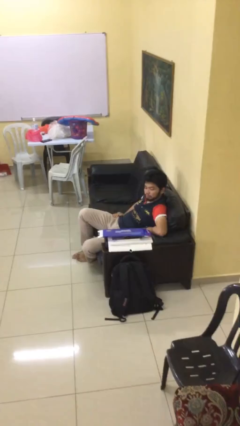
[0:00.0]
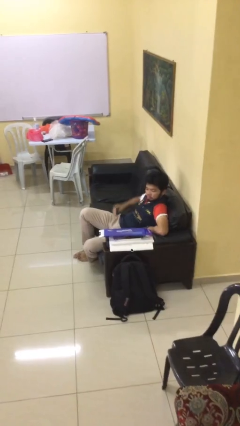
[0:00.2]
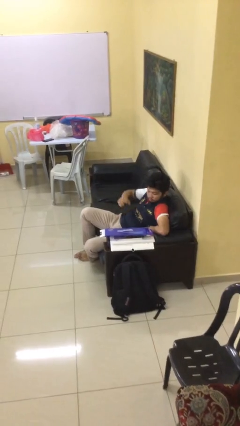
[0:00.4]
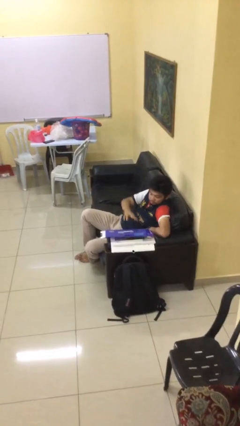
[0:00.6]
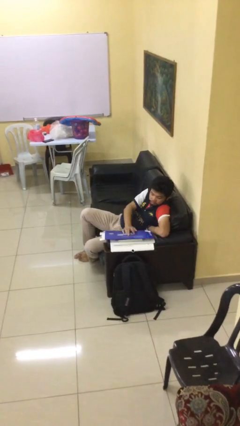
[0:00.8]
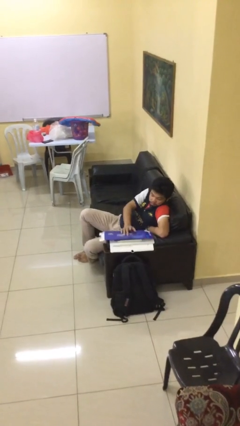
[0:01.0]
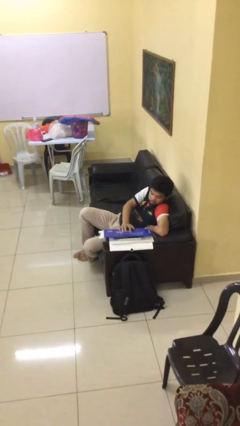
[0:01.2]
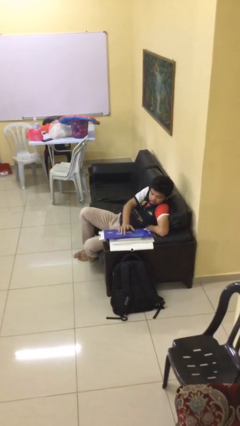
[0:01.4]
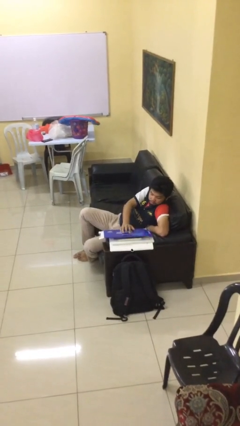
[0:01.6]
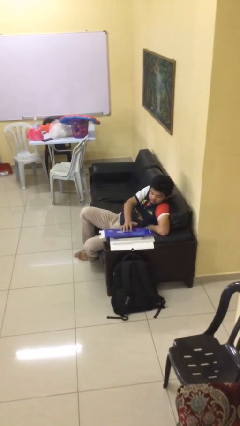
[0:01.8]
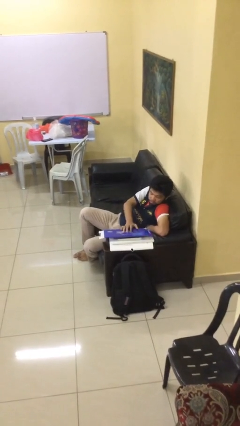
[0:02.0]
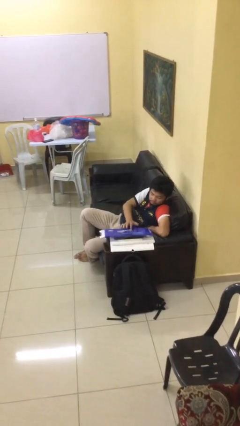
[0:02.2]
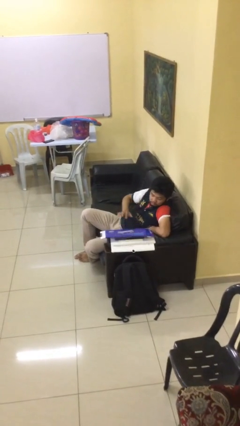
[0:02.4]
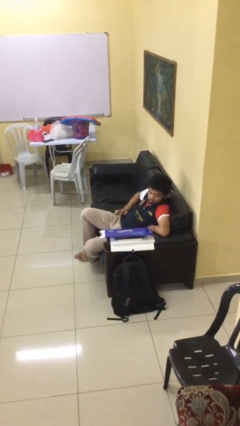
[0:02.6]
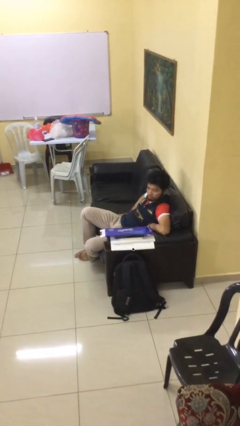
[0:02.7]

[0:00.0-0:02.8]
person taps object with finger

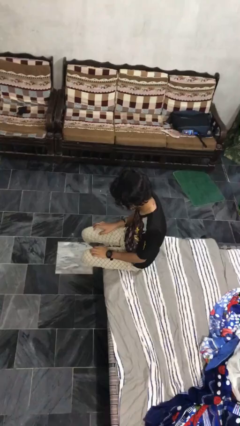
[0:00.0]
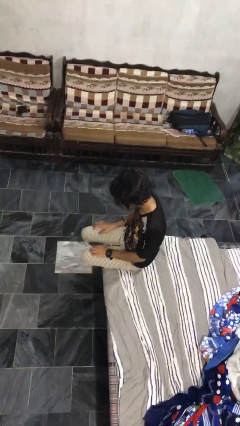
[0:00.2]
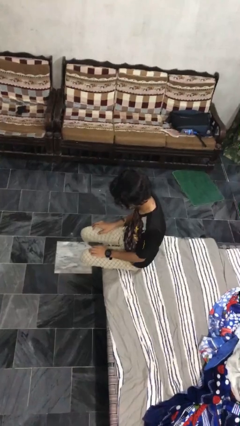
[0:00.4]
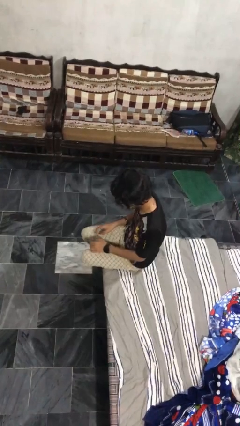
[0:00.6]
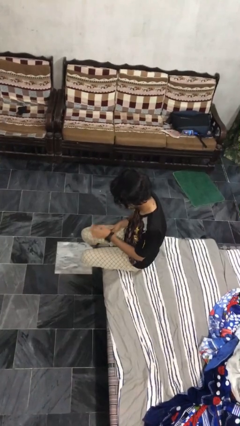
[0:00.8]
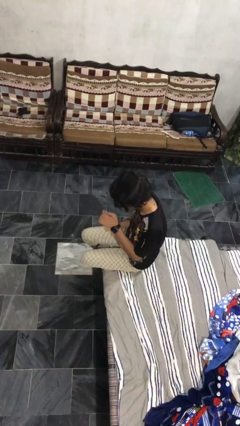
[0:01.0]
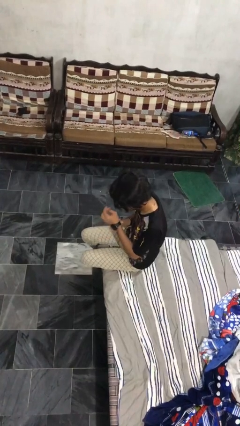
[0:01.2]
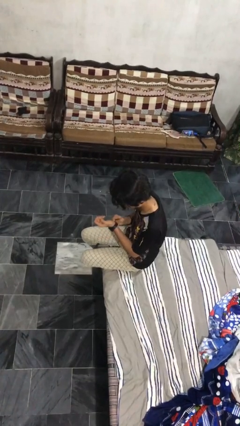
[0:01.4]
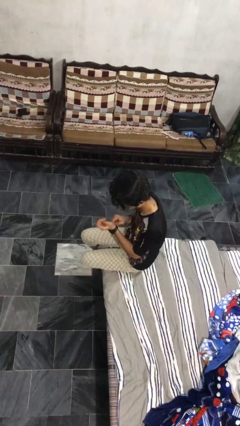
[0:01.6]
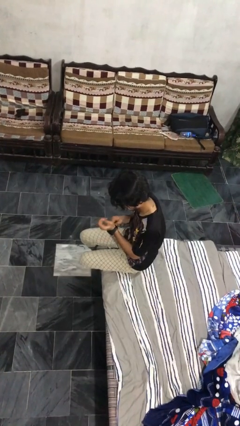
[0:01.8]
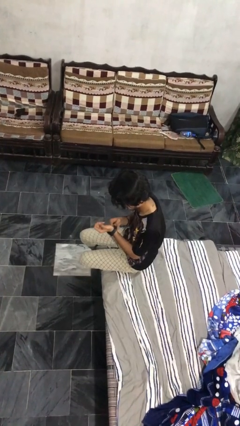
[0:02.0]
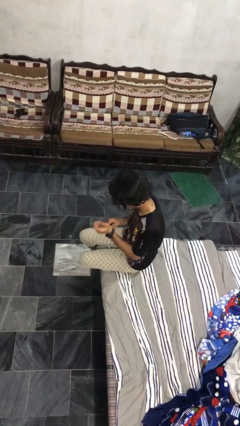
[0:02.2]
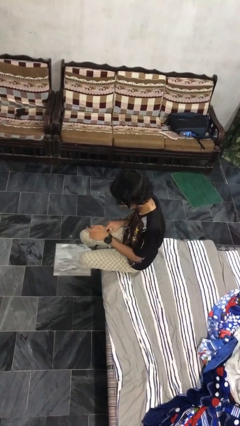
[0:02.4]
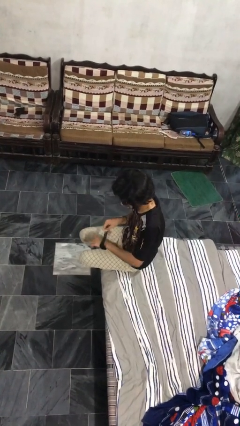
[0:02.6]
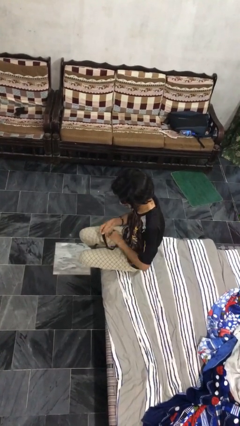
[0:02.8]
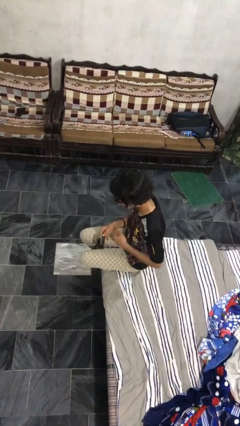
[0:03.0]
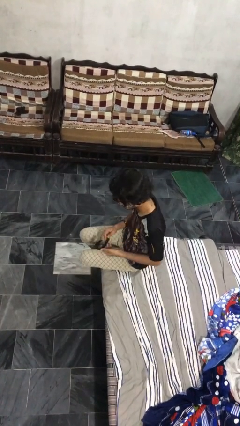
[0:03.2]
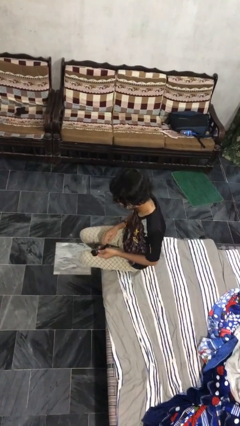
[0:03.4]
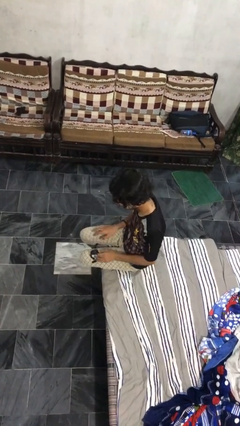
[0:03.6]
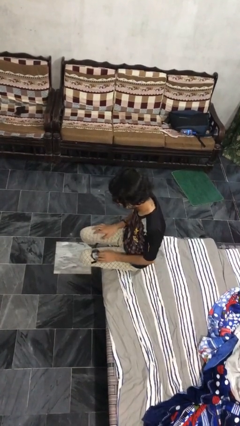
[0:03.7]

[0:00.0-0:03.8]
person takes off wristwatch

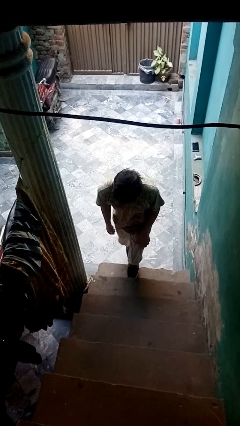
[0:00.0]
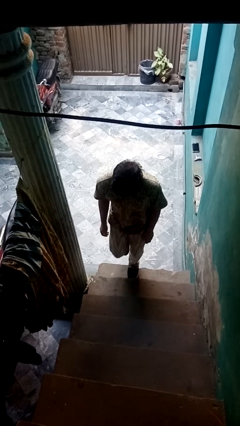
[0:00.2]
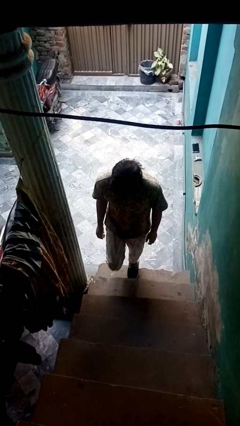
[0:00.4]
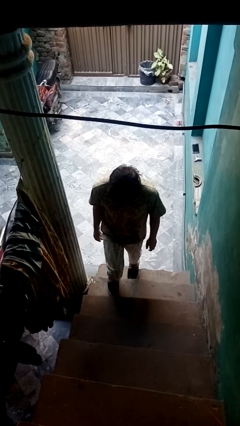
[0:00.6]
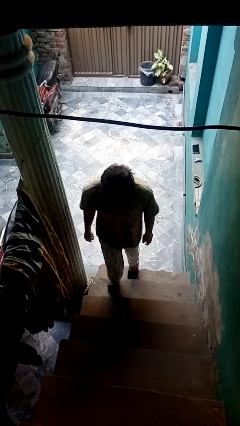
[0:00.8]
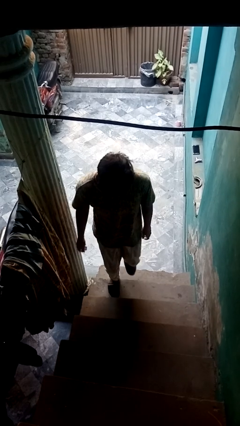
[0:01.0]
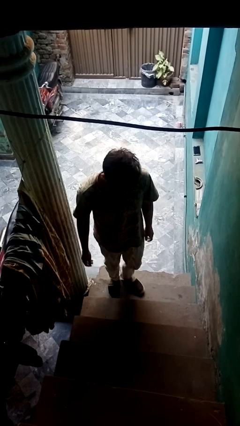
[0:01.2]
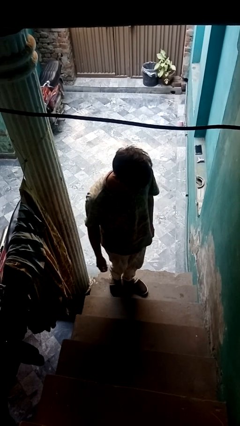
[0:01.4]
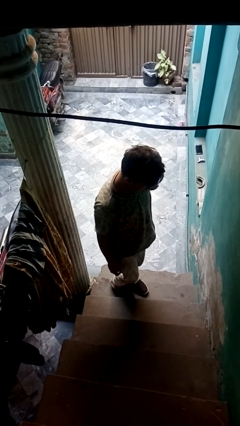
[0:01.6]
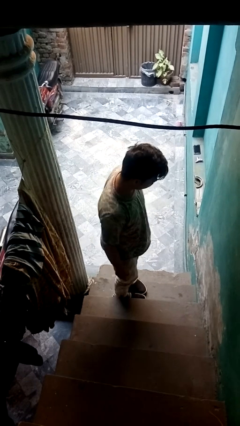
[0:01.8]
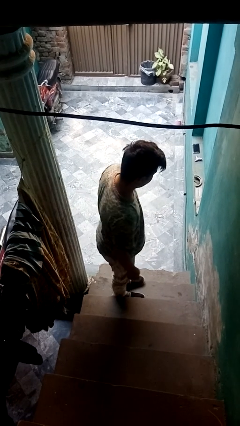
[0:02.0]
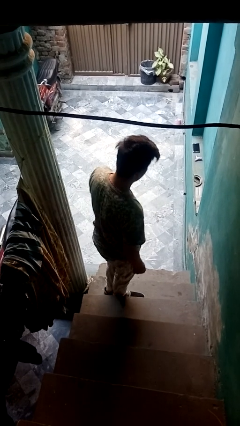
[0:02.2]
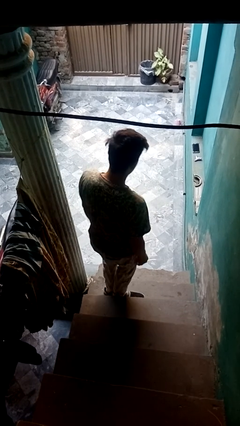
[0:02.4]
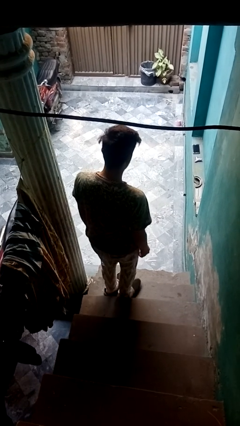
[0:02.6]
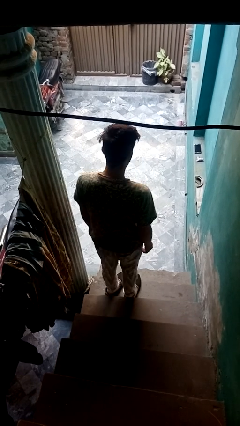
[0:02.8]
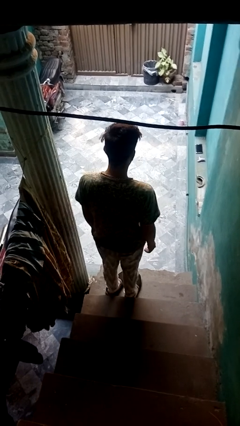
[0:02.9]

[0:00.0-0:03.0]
person climbs up stairs

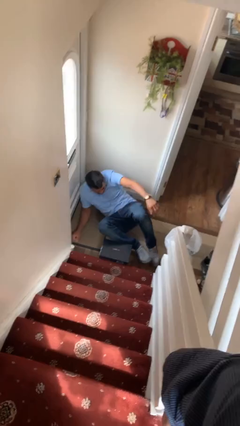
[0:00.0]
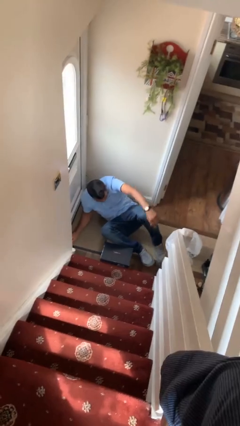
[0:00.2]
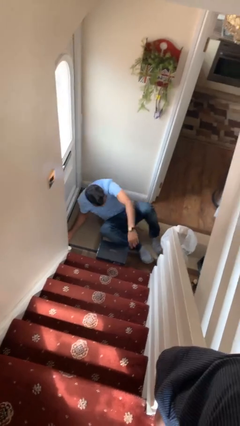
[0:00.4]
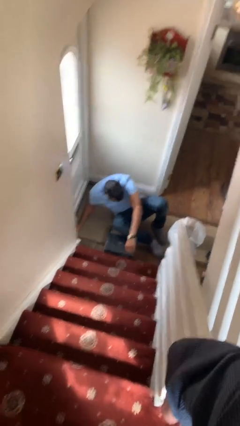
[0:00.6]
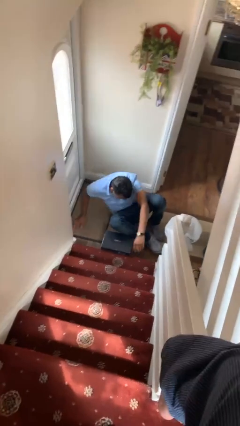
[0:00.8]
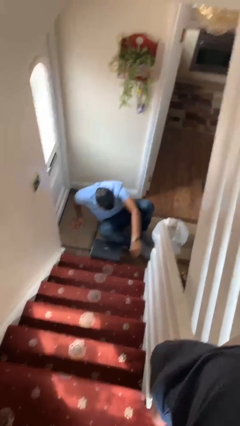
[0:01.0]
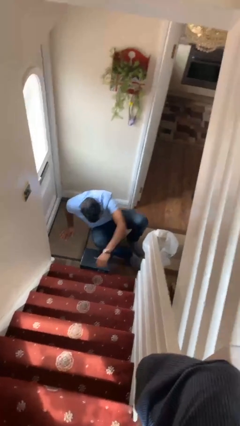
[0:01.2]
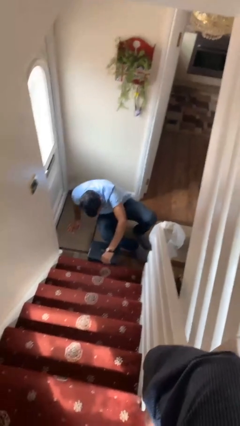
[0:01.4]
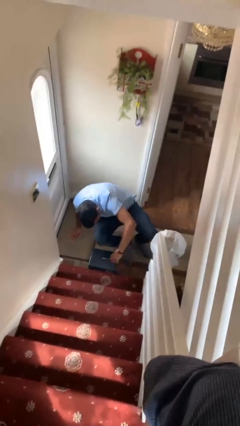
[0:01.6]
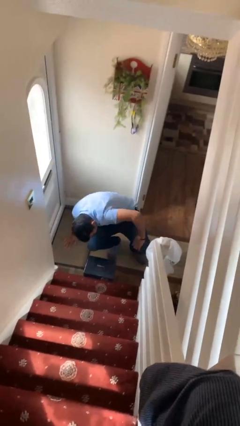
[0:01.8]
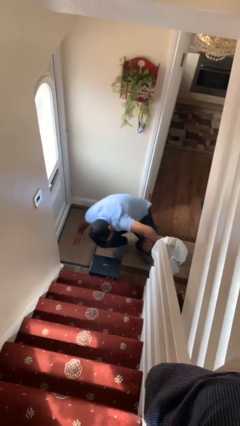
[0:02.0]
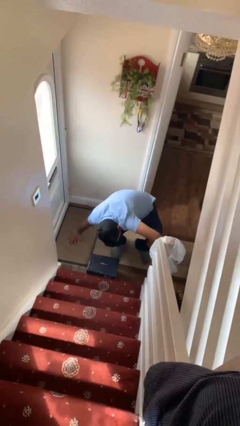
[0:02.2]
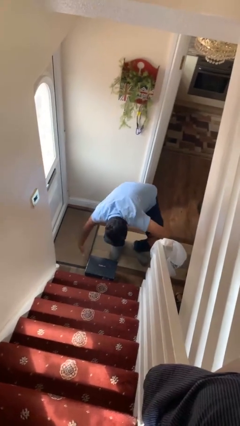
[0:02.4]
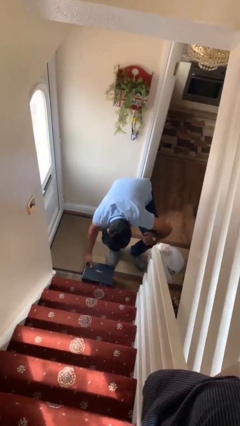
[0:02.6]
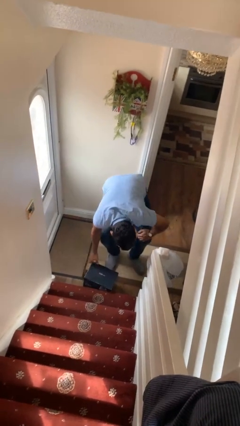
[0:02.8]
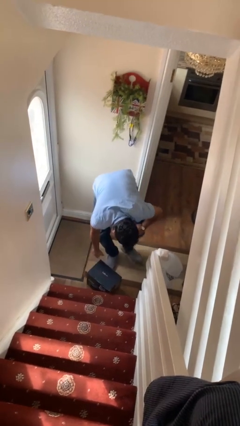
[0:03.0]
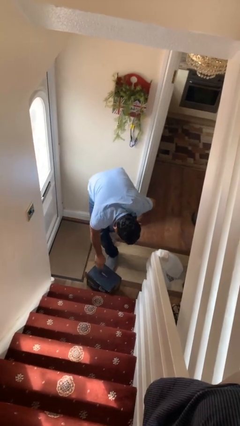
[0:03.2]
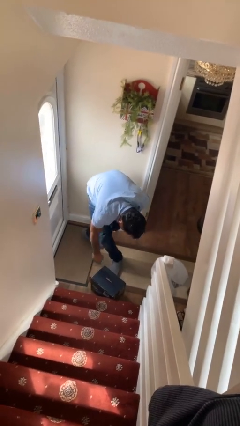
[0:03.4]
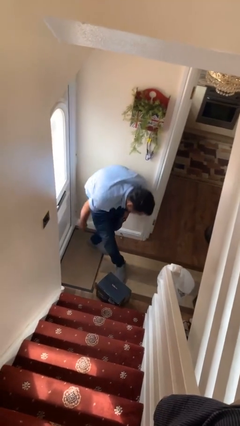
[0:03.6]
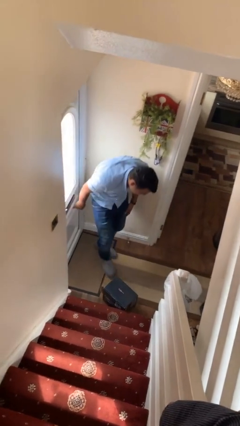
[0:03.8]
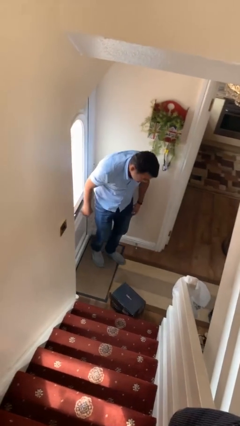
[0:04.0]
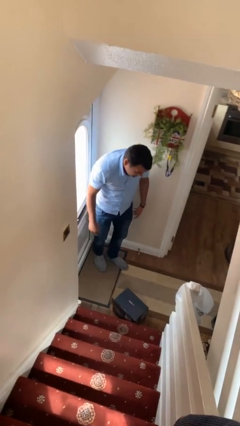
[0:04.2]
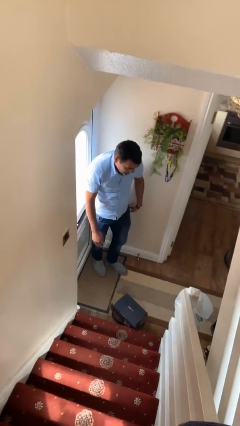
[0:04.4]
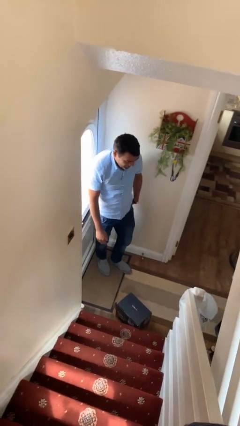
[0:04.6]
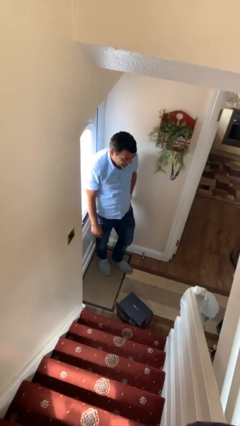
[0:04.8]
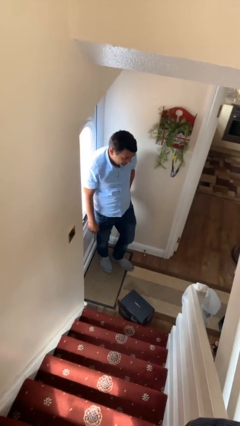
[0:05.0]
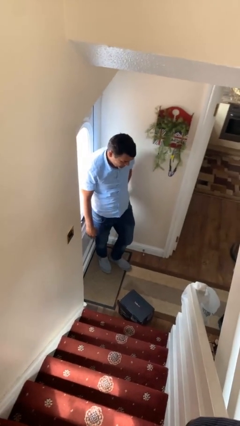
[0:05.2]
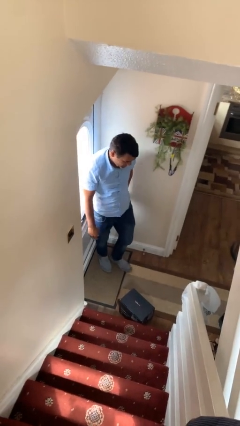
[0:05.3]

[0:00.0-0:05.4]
person stands up from floor

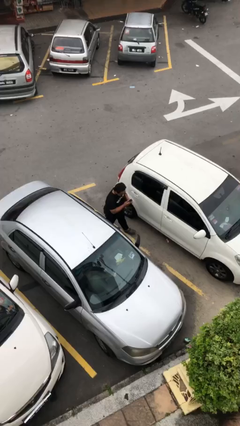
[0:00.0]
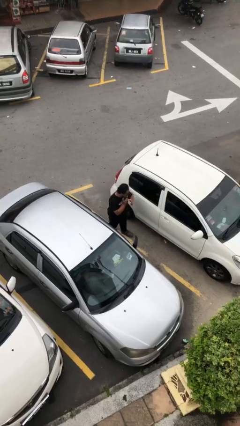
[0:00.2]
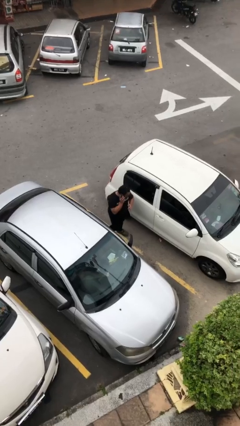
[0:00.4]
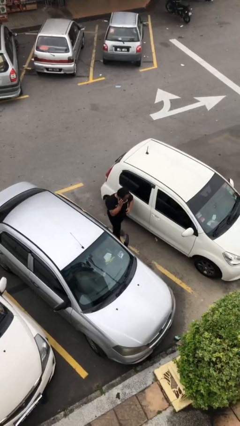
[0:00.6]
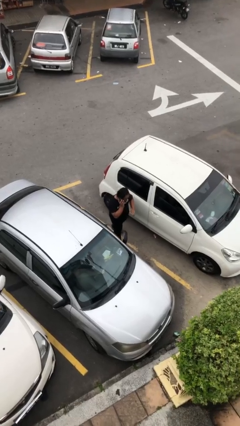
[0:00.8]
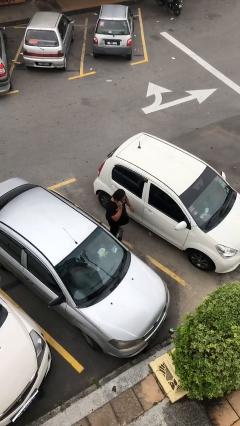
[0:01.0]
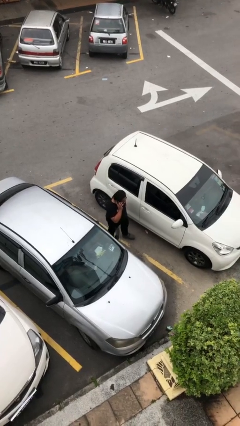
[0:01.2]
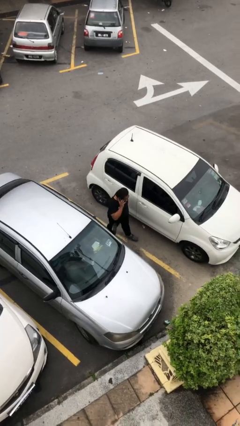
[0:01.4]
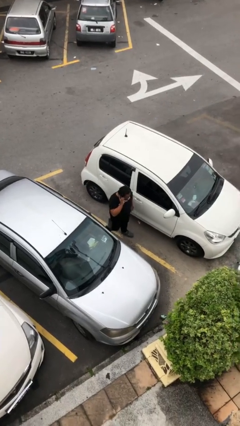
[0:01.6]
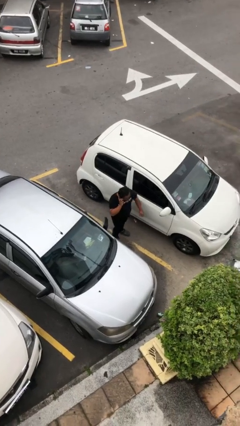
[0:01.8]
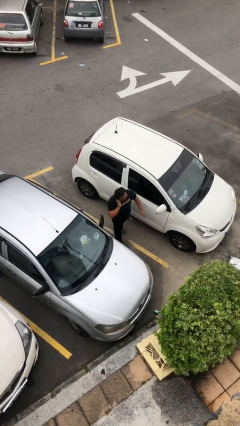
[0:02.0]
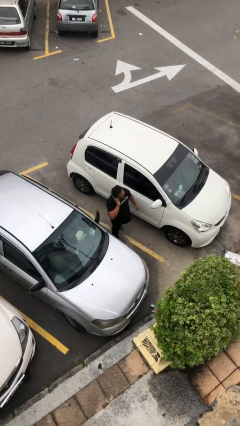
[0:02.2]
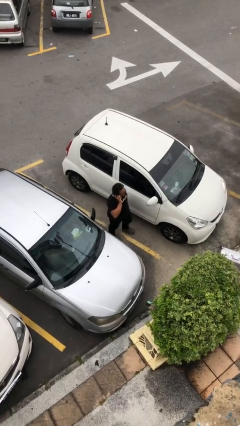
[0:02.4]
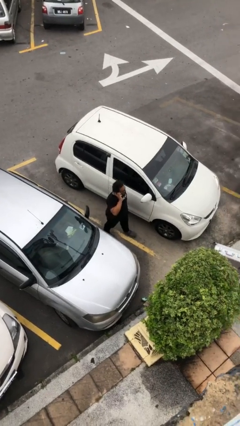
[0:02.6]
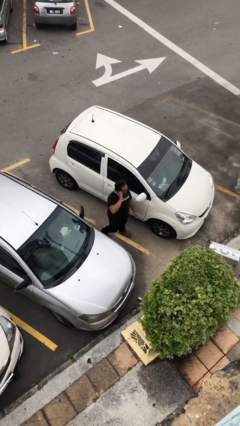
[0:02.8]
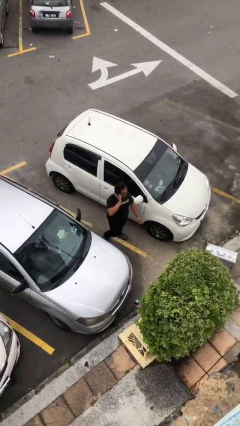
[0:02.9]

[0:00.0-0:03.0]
person talks on phone
